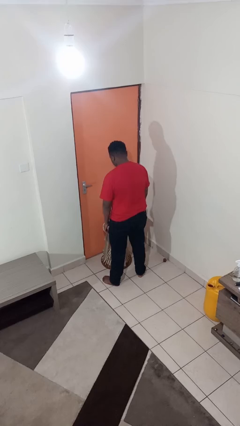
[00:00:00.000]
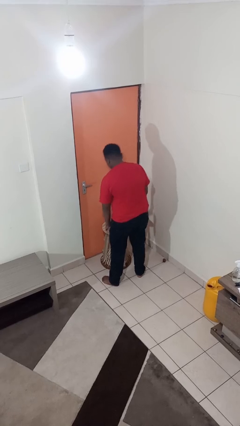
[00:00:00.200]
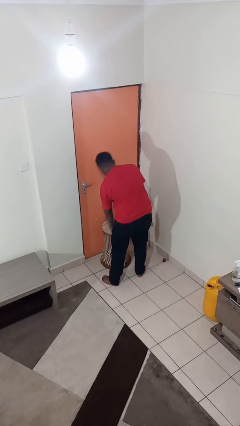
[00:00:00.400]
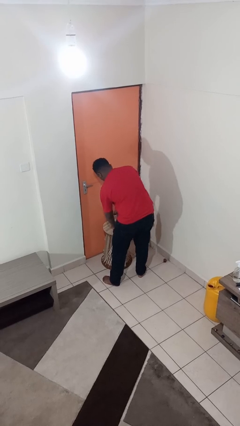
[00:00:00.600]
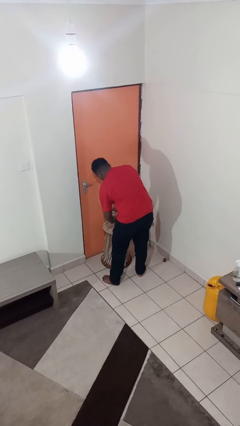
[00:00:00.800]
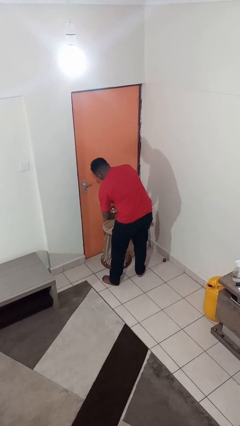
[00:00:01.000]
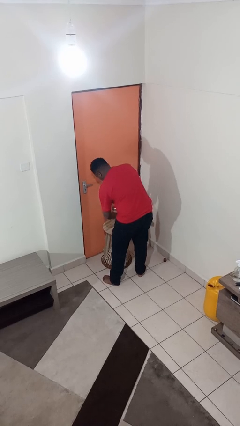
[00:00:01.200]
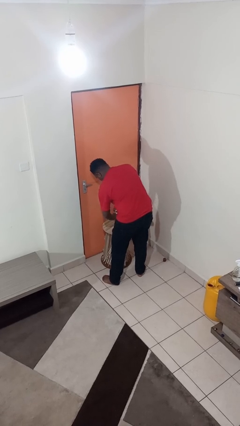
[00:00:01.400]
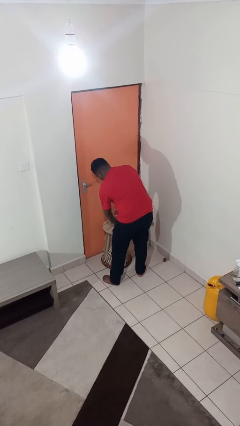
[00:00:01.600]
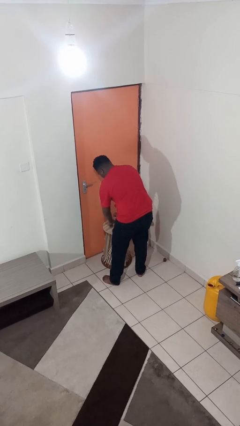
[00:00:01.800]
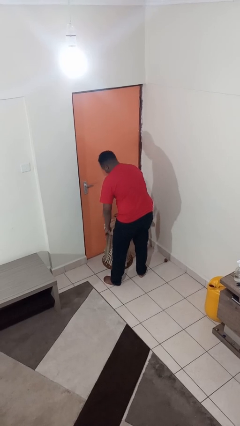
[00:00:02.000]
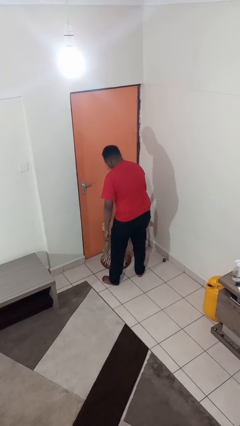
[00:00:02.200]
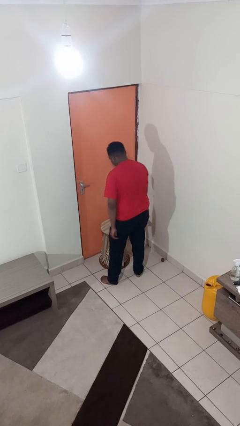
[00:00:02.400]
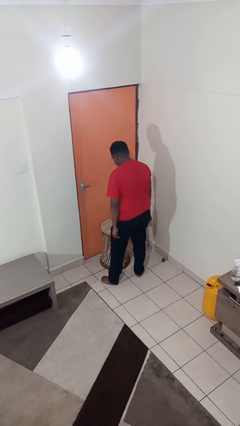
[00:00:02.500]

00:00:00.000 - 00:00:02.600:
person closes jar

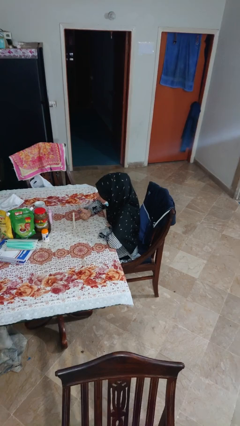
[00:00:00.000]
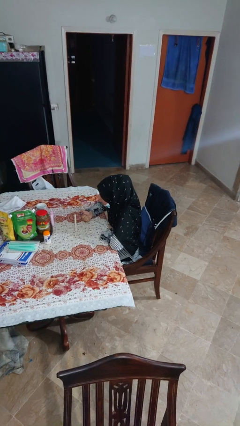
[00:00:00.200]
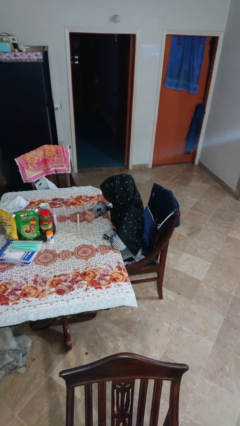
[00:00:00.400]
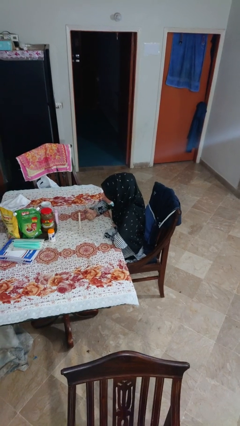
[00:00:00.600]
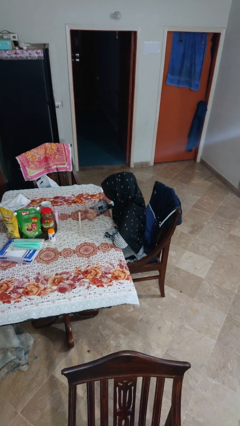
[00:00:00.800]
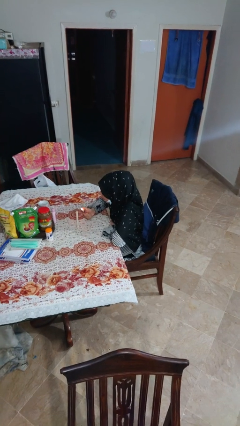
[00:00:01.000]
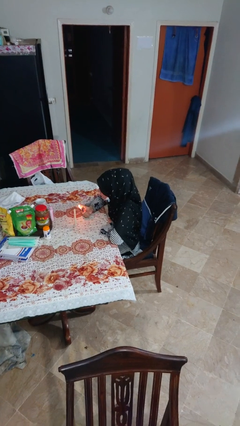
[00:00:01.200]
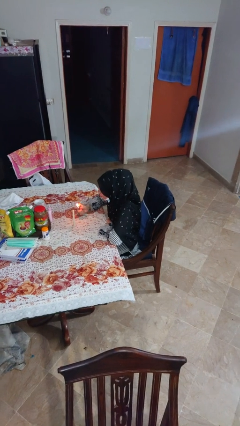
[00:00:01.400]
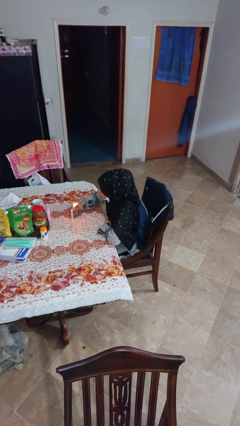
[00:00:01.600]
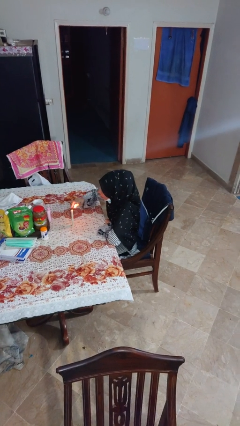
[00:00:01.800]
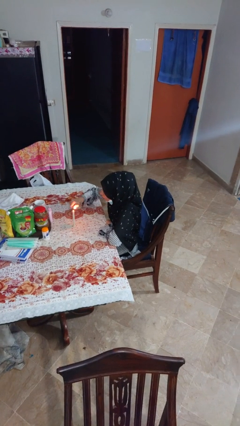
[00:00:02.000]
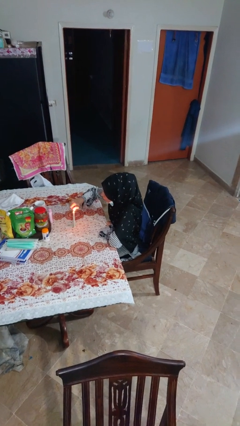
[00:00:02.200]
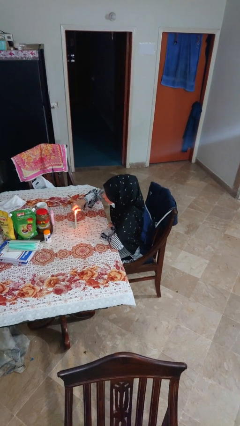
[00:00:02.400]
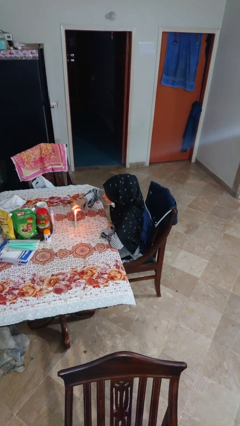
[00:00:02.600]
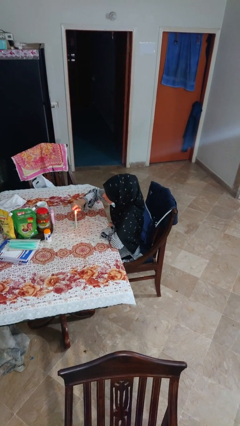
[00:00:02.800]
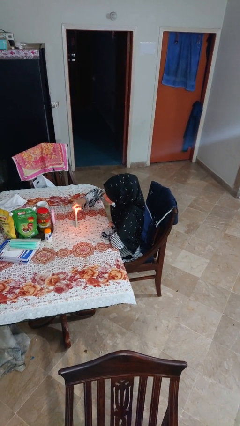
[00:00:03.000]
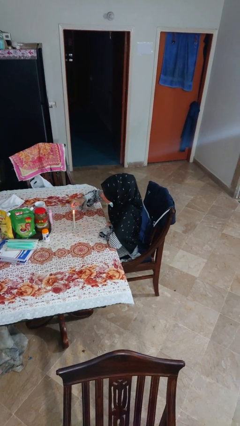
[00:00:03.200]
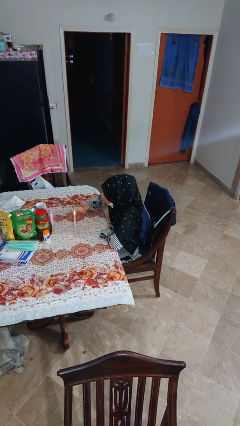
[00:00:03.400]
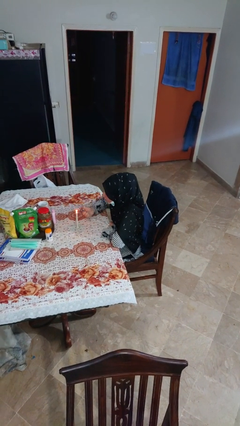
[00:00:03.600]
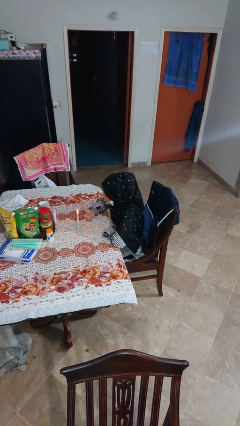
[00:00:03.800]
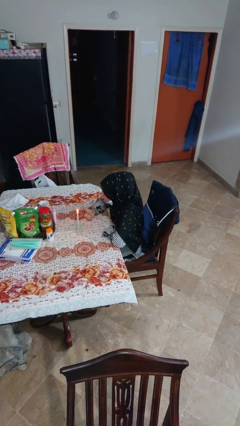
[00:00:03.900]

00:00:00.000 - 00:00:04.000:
person lights candle

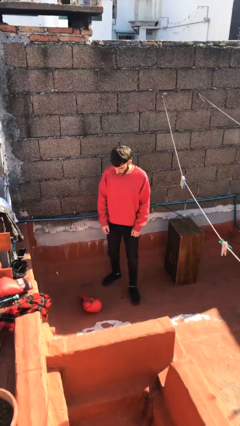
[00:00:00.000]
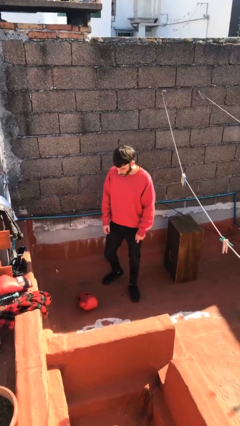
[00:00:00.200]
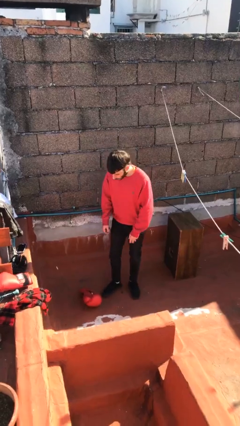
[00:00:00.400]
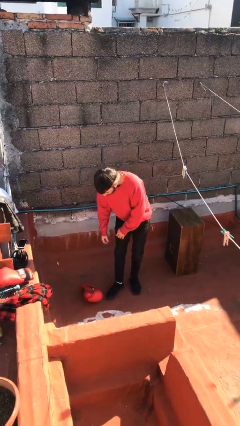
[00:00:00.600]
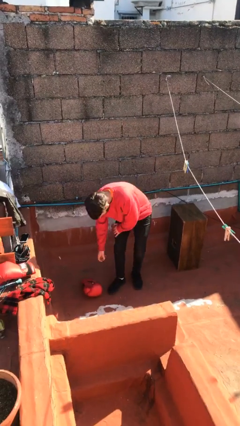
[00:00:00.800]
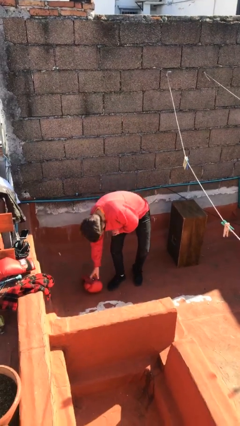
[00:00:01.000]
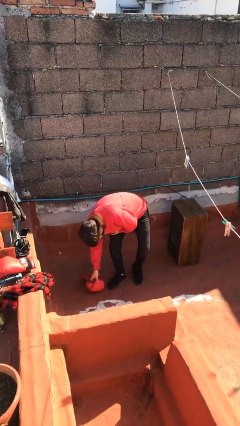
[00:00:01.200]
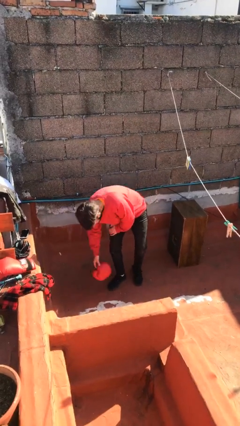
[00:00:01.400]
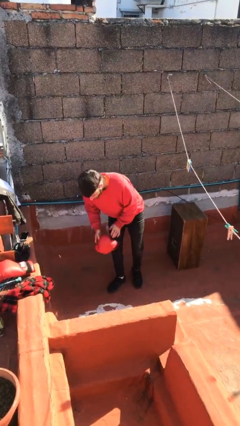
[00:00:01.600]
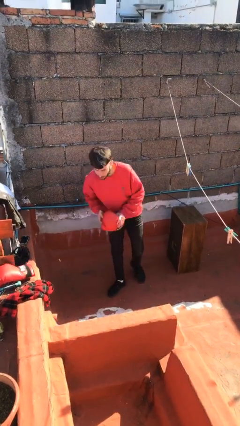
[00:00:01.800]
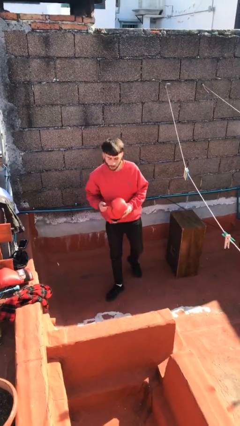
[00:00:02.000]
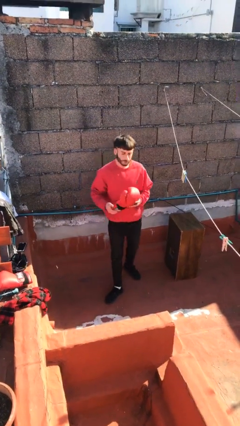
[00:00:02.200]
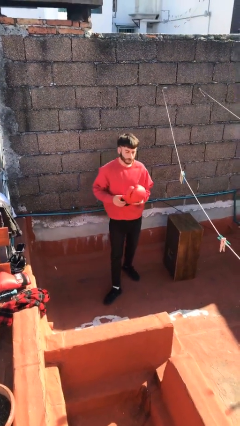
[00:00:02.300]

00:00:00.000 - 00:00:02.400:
person picks up object from floor

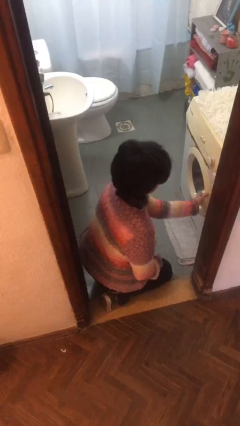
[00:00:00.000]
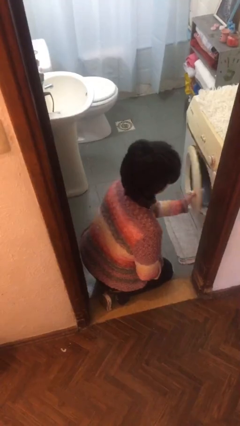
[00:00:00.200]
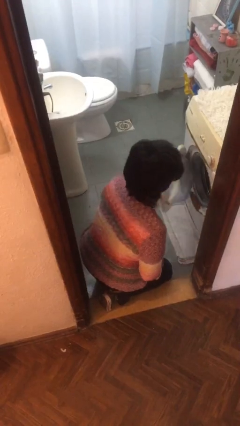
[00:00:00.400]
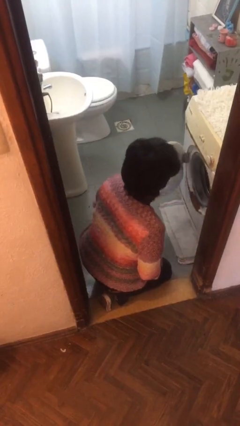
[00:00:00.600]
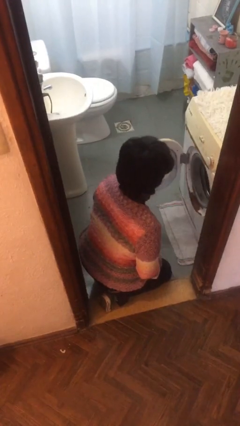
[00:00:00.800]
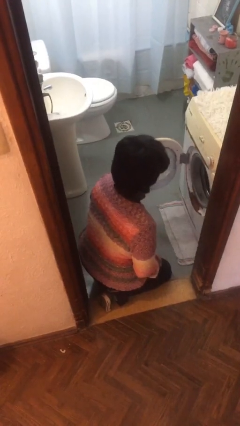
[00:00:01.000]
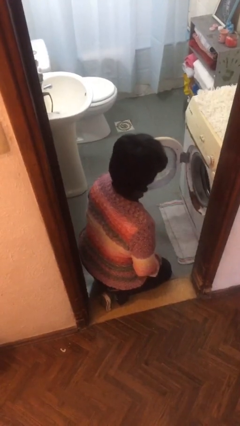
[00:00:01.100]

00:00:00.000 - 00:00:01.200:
person opens clothes washer

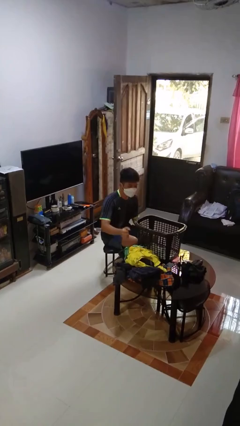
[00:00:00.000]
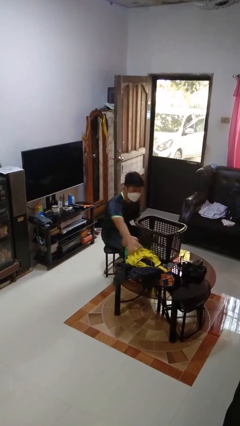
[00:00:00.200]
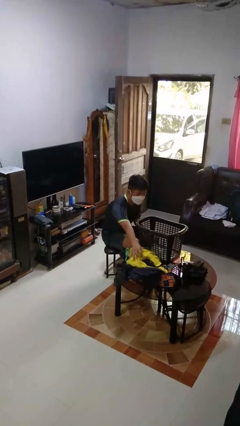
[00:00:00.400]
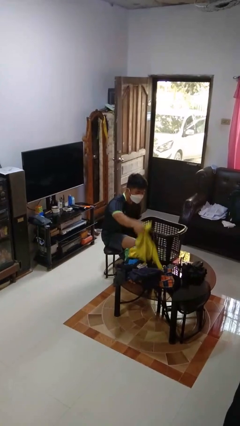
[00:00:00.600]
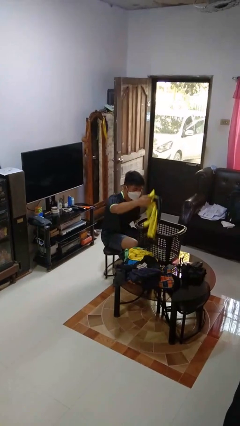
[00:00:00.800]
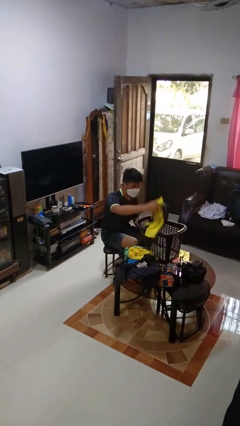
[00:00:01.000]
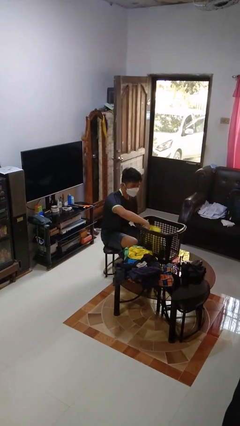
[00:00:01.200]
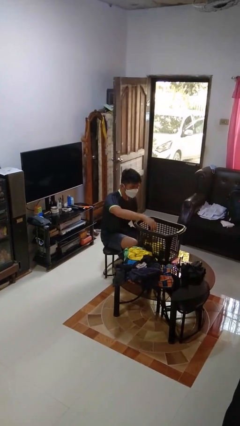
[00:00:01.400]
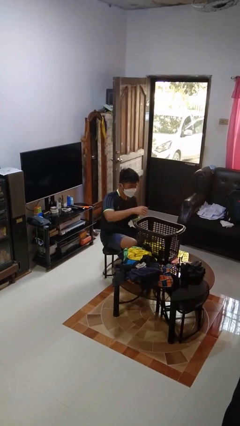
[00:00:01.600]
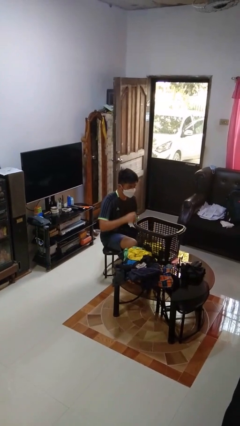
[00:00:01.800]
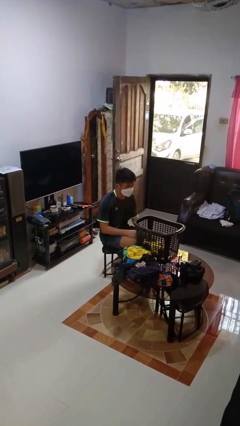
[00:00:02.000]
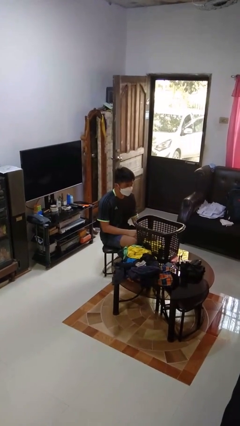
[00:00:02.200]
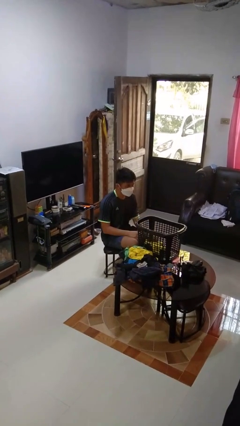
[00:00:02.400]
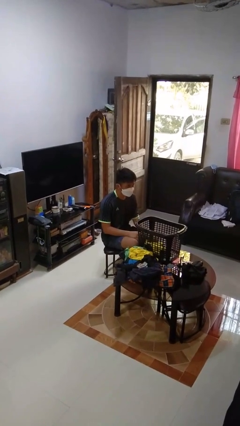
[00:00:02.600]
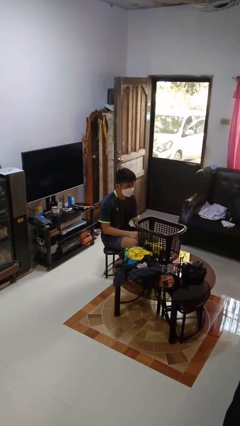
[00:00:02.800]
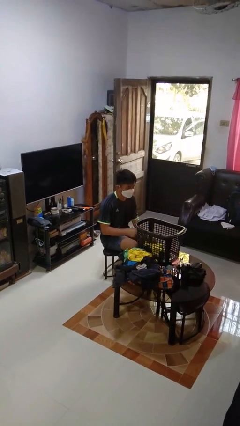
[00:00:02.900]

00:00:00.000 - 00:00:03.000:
person puts object into basket

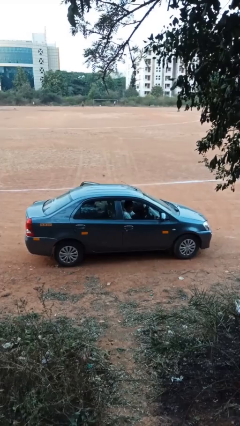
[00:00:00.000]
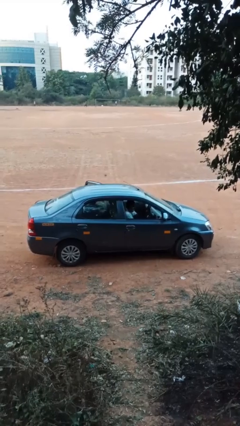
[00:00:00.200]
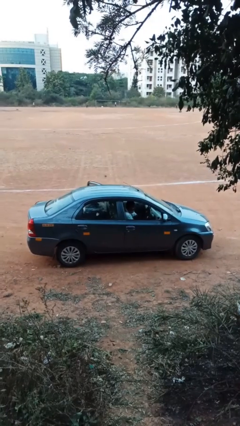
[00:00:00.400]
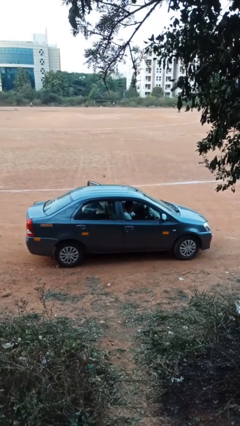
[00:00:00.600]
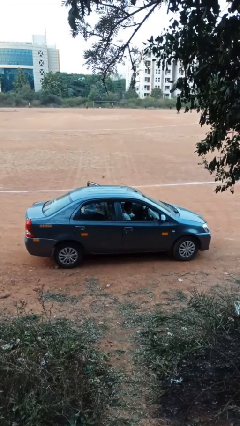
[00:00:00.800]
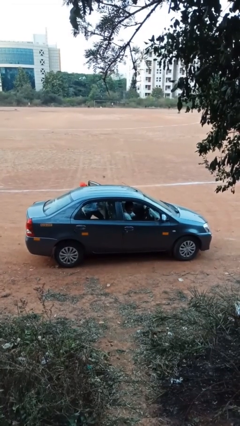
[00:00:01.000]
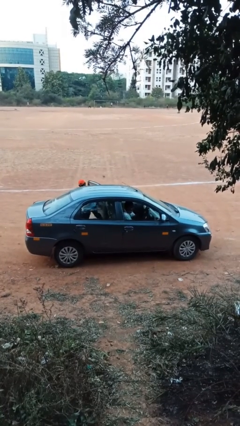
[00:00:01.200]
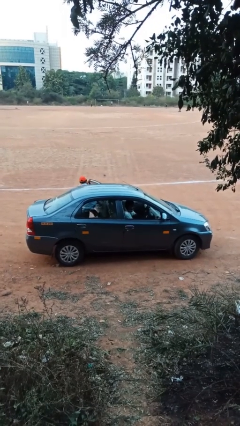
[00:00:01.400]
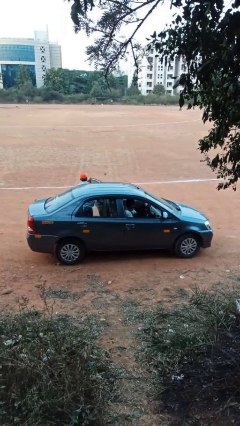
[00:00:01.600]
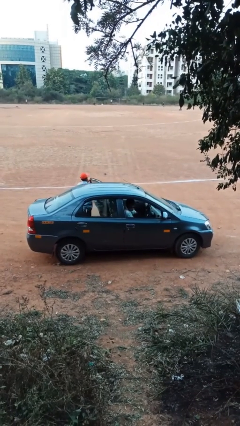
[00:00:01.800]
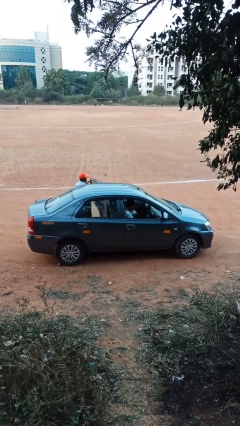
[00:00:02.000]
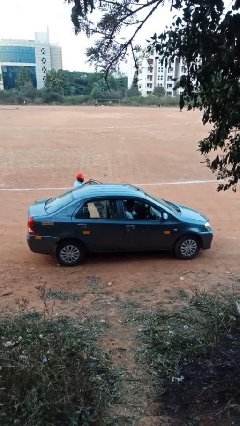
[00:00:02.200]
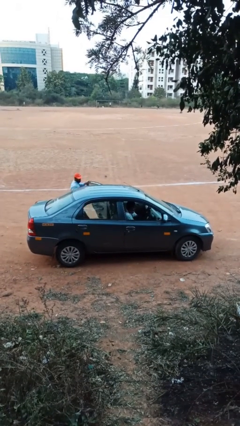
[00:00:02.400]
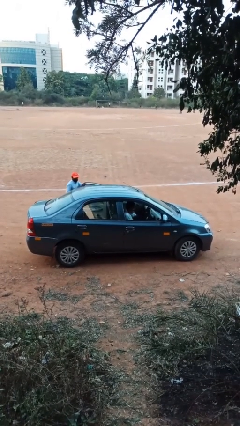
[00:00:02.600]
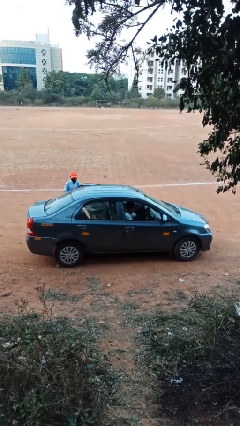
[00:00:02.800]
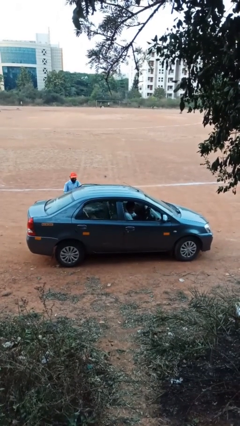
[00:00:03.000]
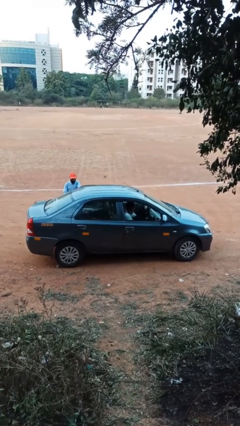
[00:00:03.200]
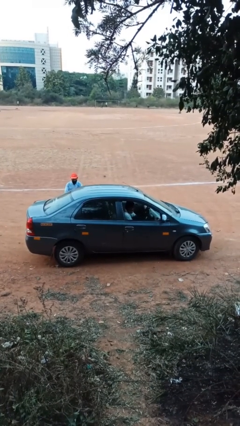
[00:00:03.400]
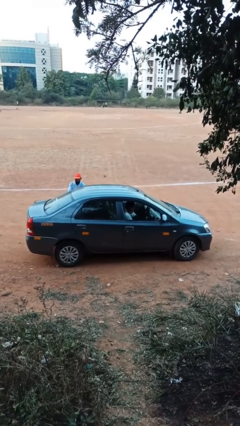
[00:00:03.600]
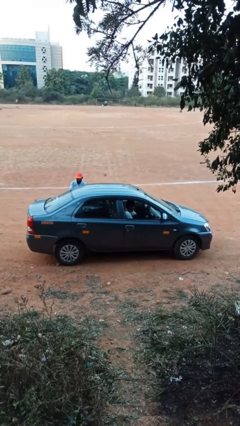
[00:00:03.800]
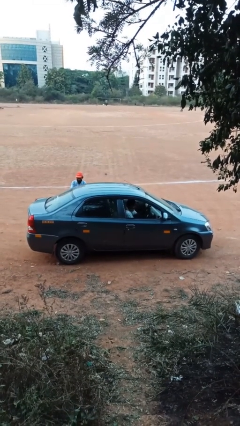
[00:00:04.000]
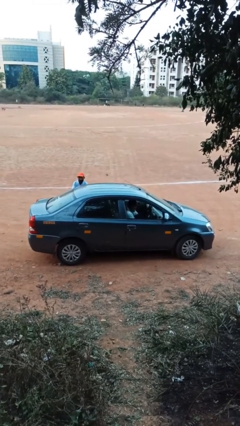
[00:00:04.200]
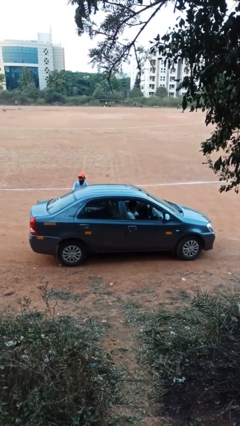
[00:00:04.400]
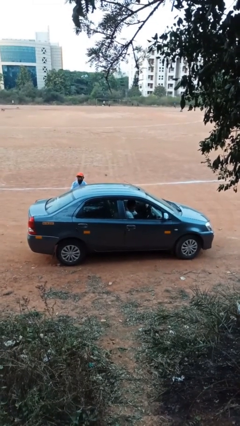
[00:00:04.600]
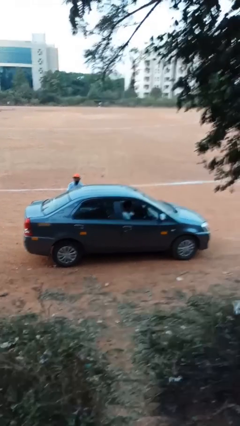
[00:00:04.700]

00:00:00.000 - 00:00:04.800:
car drops off person
